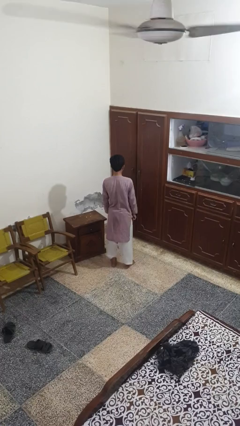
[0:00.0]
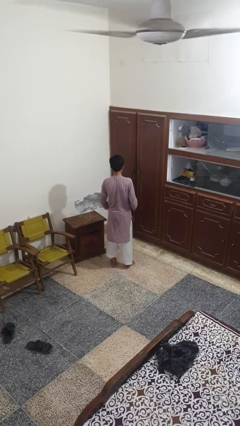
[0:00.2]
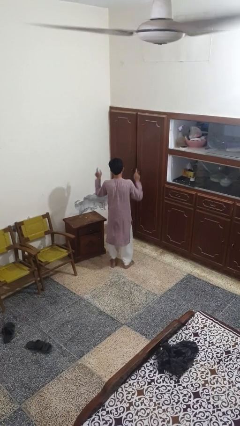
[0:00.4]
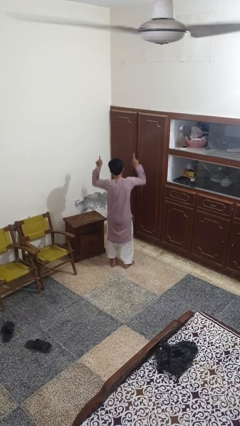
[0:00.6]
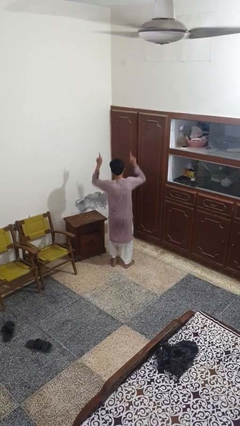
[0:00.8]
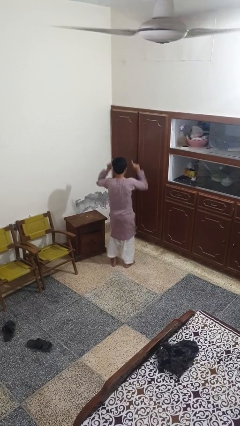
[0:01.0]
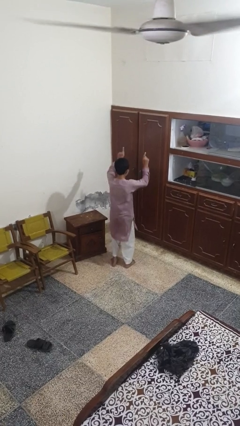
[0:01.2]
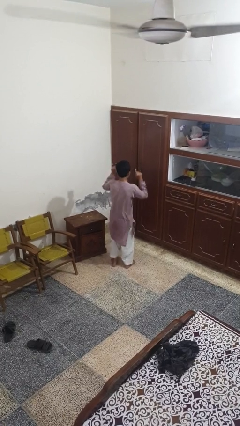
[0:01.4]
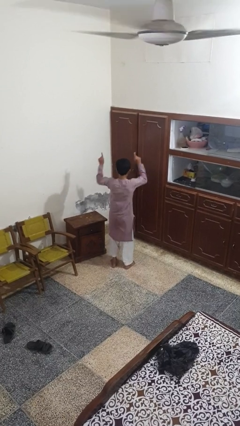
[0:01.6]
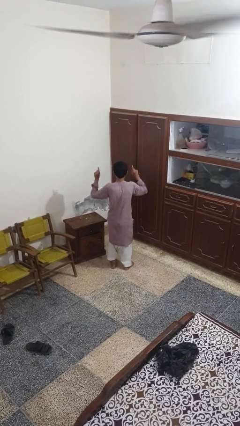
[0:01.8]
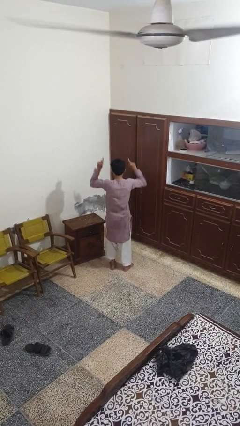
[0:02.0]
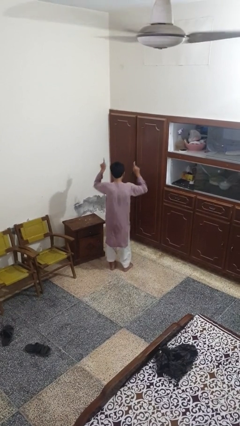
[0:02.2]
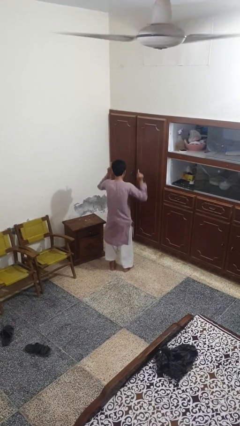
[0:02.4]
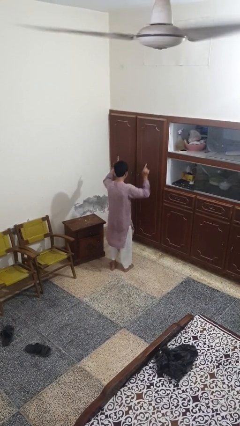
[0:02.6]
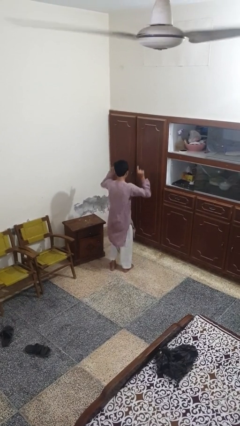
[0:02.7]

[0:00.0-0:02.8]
person dances in place

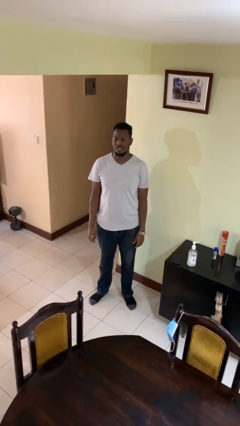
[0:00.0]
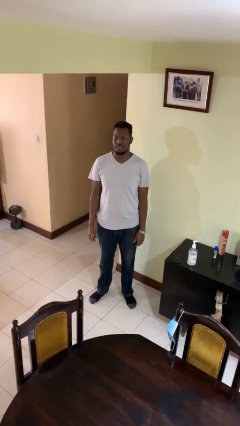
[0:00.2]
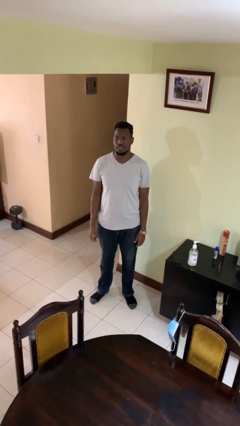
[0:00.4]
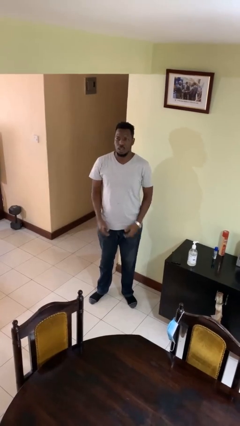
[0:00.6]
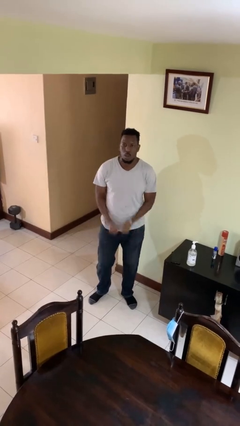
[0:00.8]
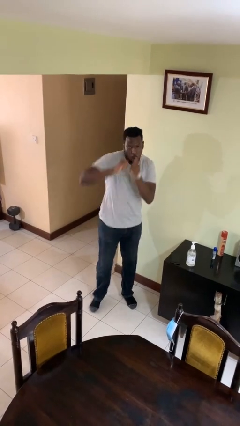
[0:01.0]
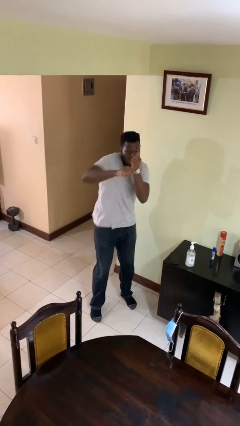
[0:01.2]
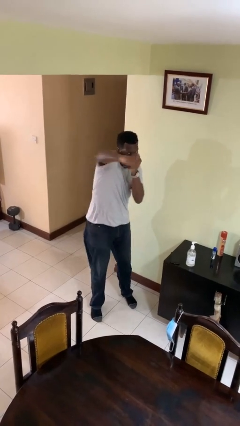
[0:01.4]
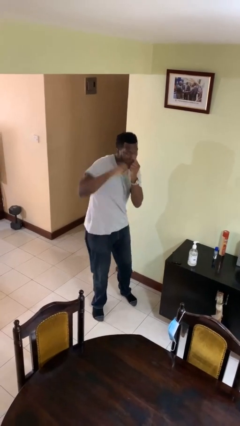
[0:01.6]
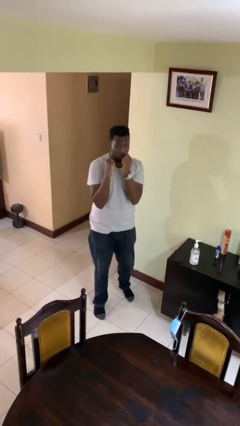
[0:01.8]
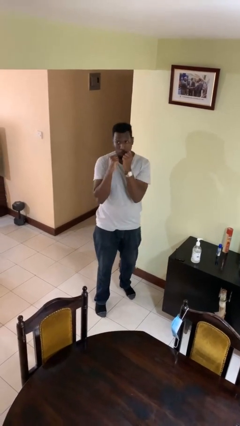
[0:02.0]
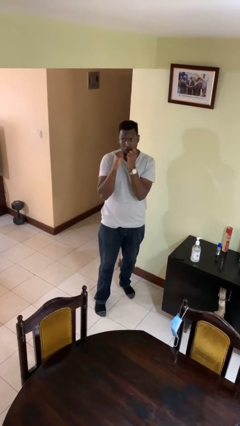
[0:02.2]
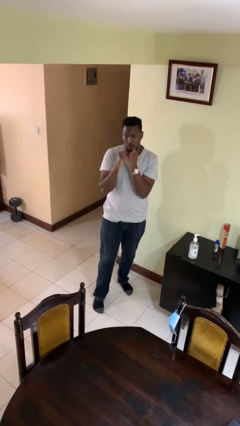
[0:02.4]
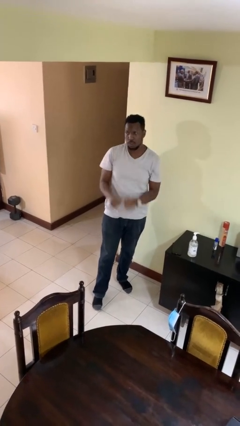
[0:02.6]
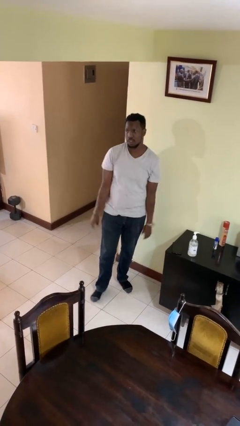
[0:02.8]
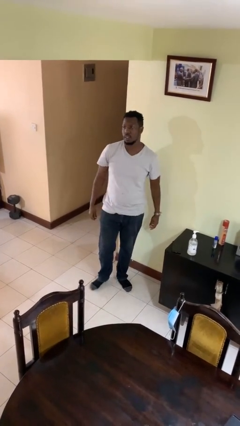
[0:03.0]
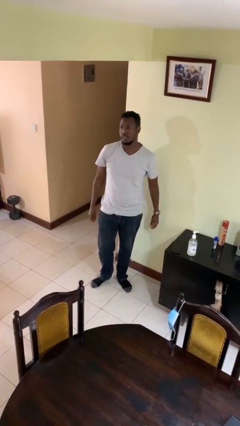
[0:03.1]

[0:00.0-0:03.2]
person punches

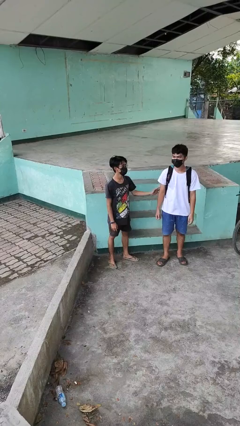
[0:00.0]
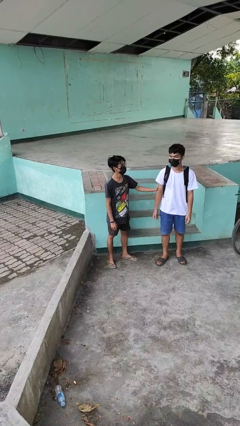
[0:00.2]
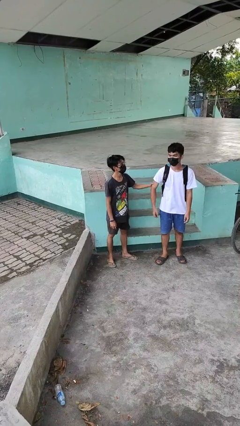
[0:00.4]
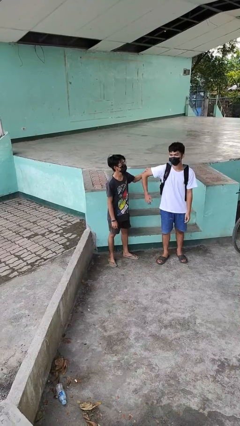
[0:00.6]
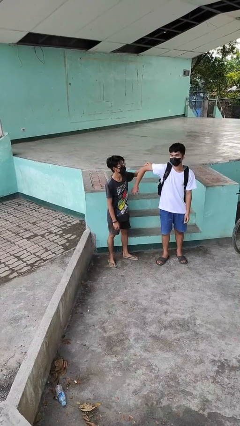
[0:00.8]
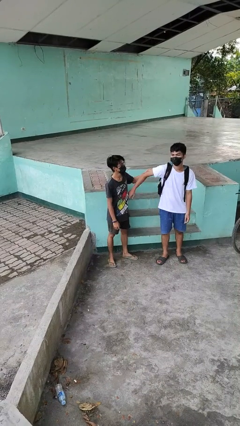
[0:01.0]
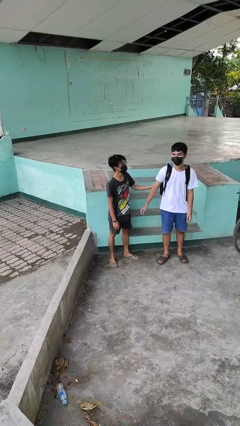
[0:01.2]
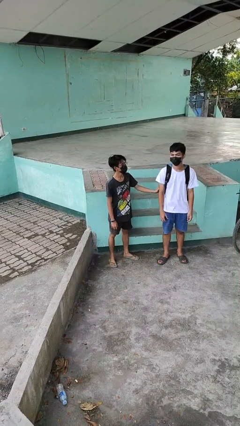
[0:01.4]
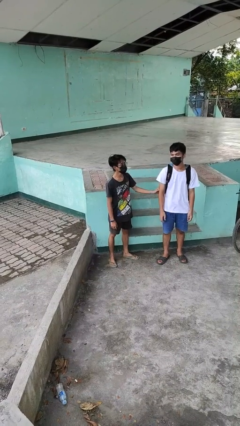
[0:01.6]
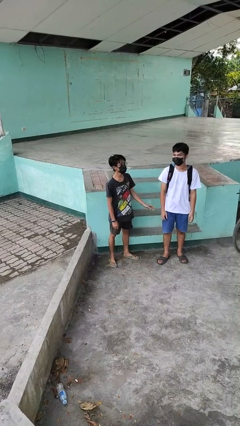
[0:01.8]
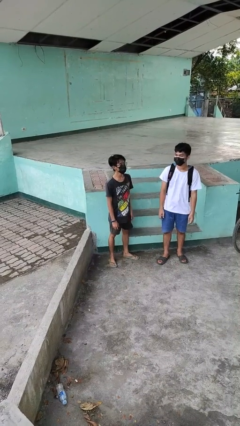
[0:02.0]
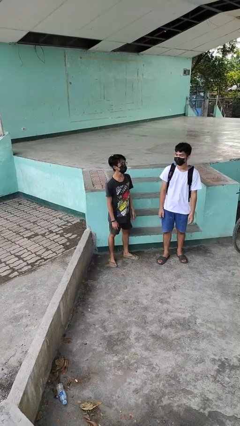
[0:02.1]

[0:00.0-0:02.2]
person grabs person by bicep

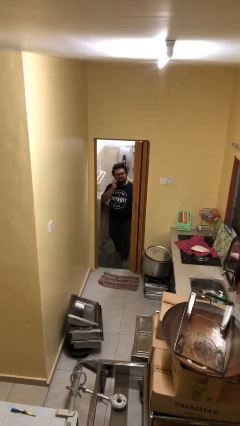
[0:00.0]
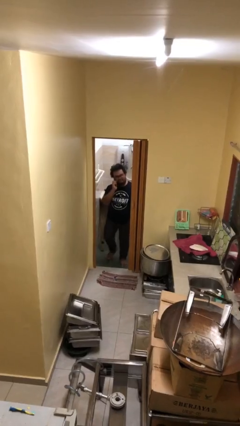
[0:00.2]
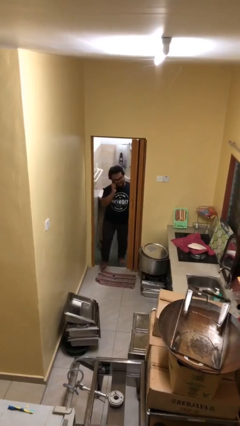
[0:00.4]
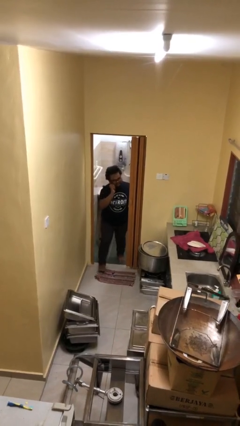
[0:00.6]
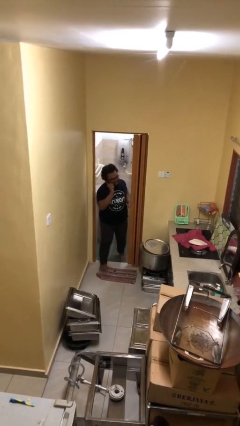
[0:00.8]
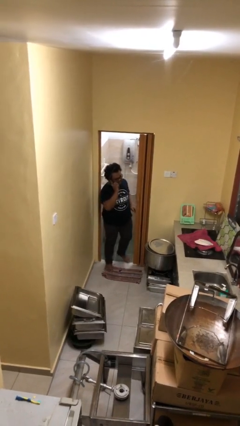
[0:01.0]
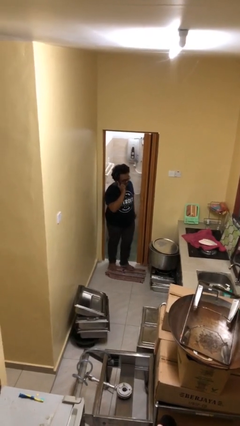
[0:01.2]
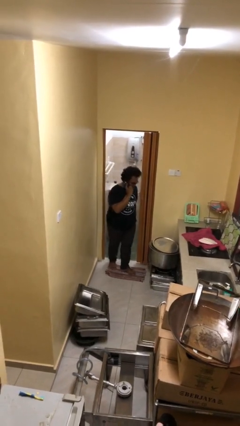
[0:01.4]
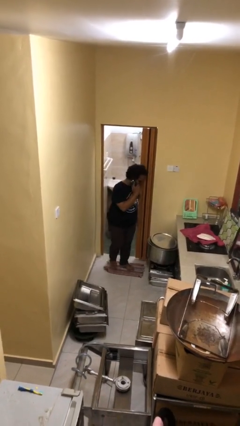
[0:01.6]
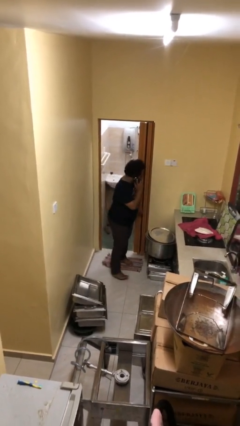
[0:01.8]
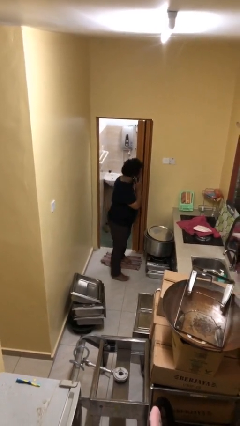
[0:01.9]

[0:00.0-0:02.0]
person enters scene through structure

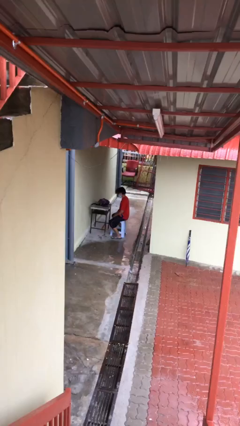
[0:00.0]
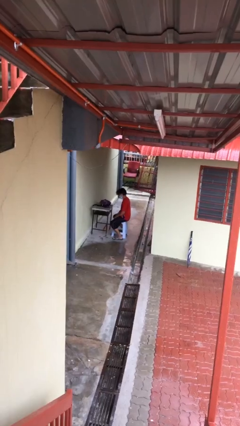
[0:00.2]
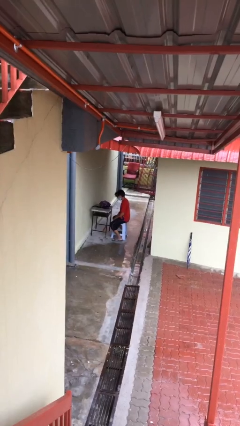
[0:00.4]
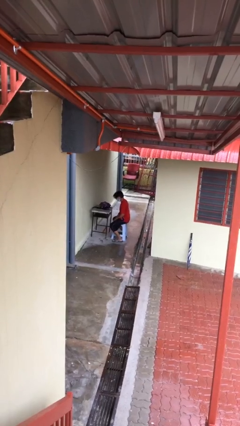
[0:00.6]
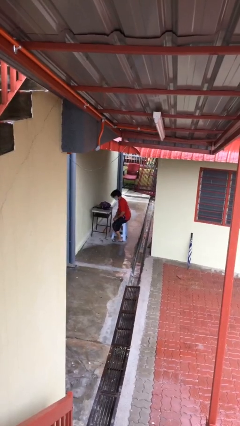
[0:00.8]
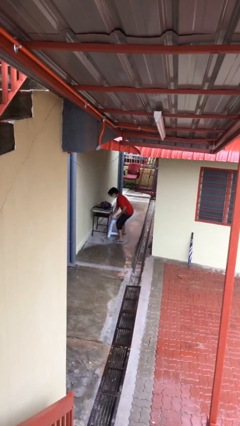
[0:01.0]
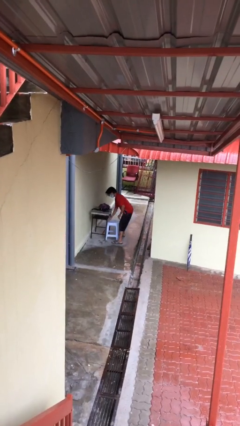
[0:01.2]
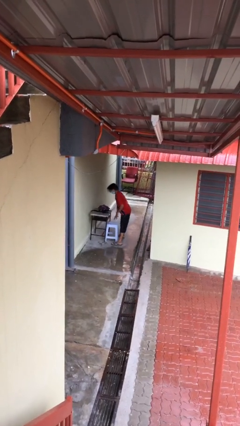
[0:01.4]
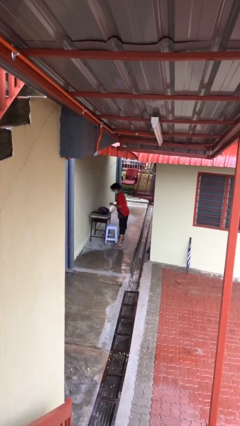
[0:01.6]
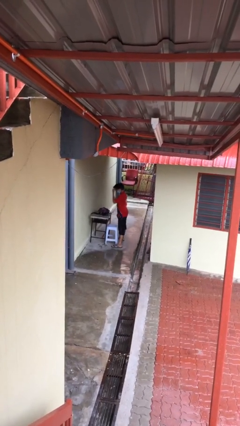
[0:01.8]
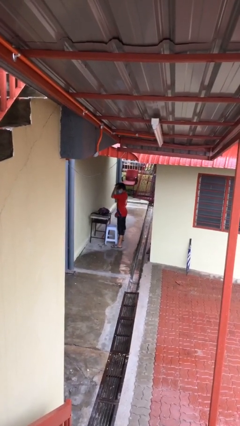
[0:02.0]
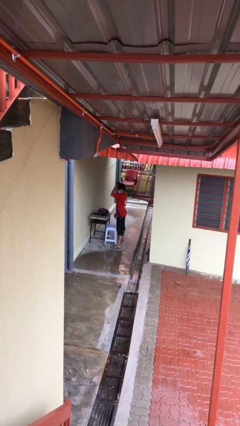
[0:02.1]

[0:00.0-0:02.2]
person stands up

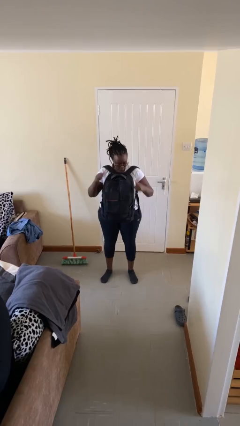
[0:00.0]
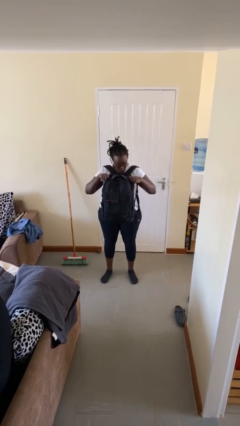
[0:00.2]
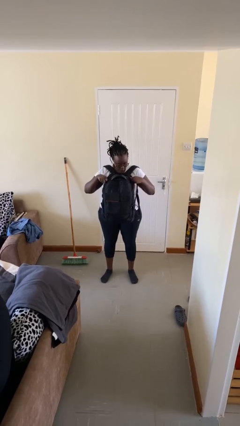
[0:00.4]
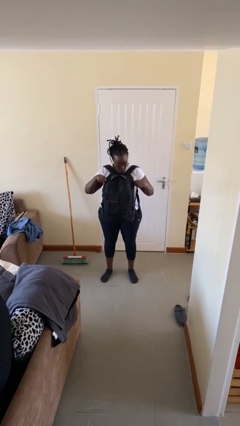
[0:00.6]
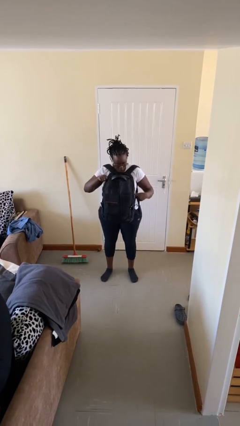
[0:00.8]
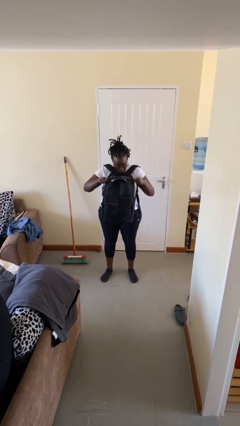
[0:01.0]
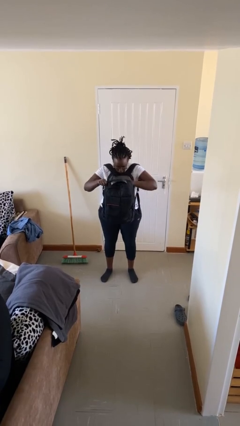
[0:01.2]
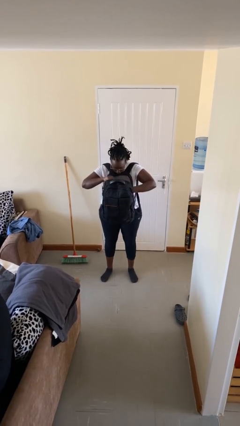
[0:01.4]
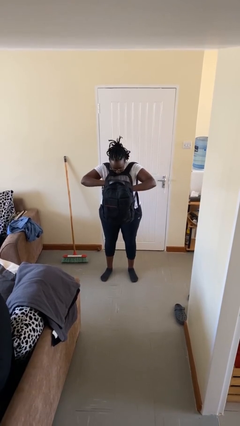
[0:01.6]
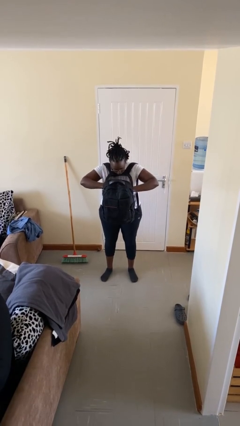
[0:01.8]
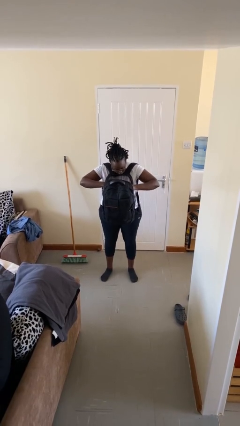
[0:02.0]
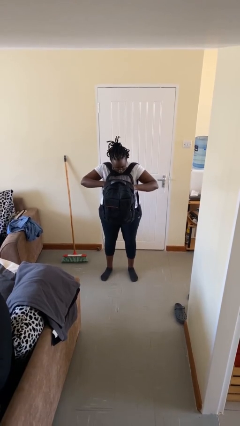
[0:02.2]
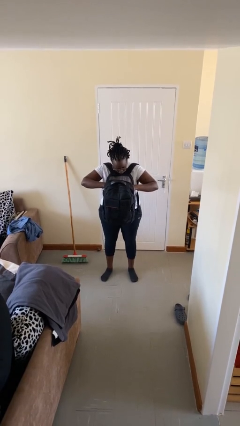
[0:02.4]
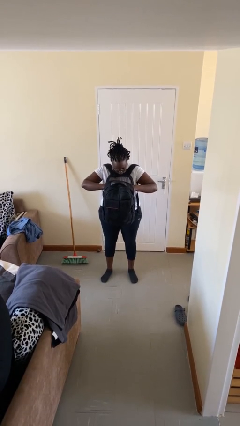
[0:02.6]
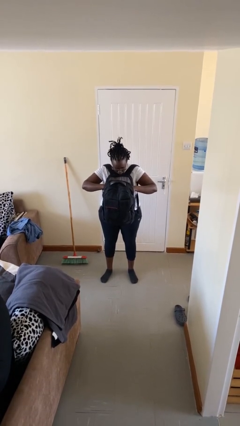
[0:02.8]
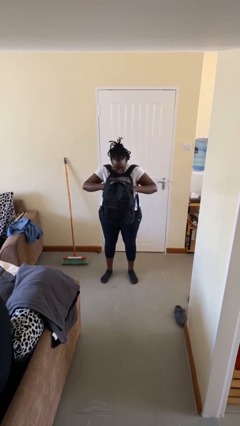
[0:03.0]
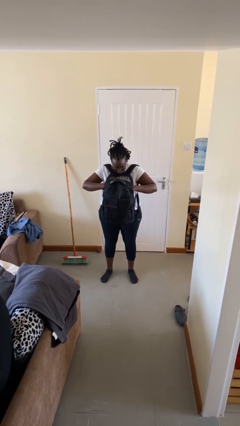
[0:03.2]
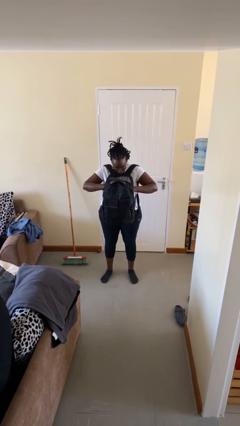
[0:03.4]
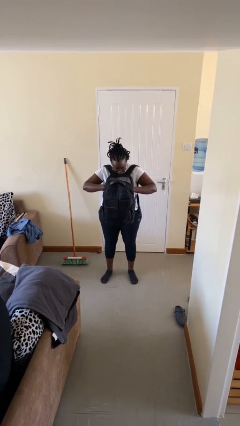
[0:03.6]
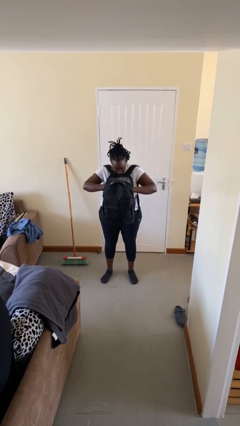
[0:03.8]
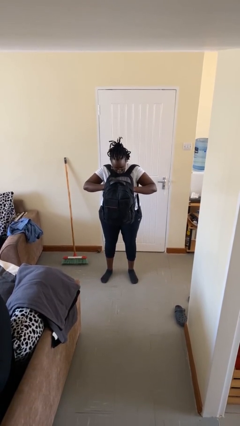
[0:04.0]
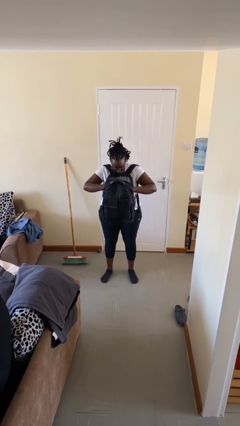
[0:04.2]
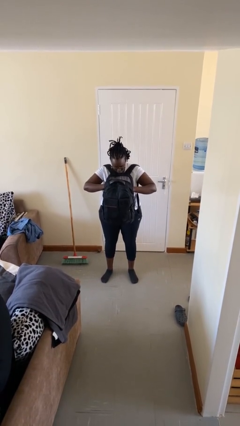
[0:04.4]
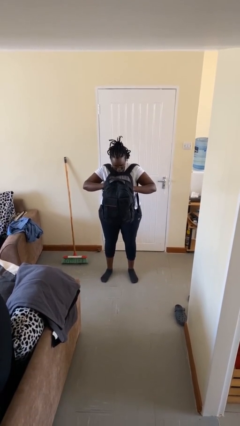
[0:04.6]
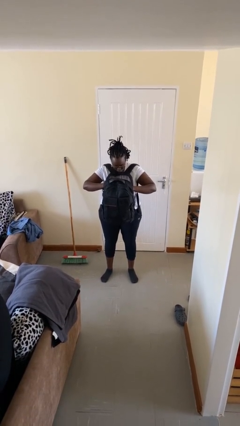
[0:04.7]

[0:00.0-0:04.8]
person searches in backpack
